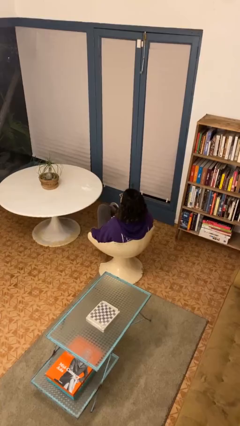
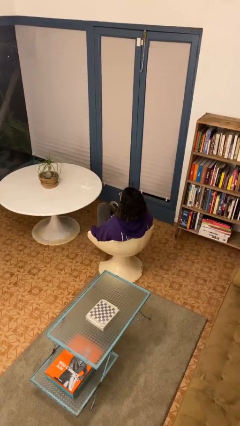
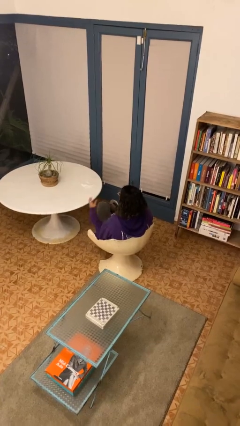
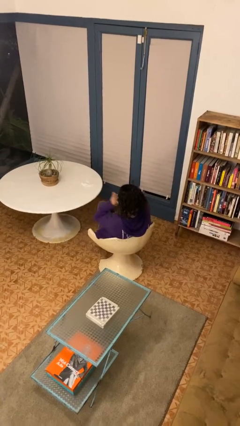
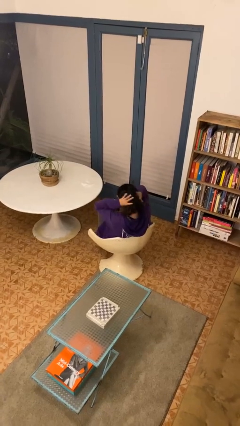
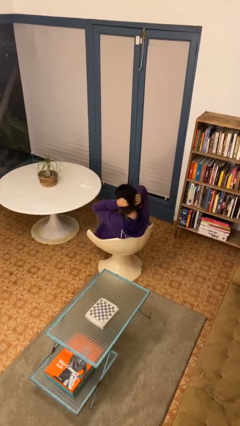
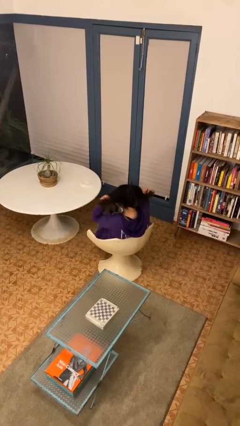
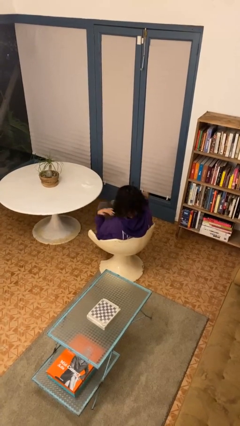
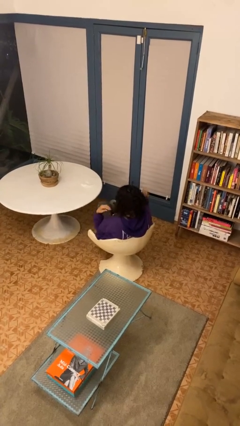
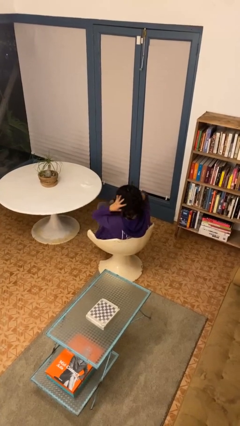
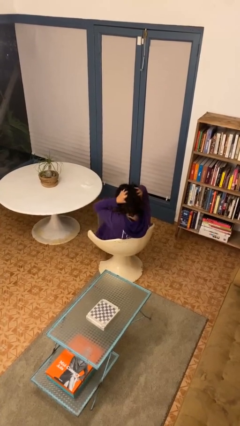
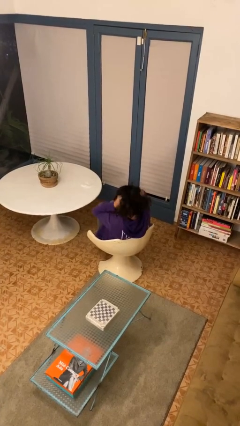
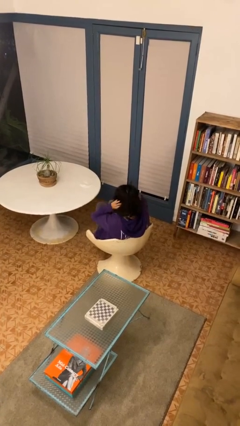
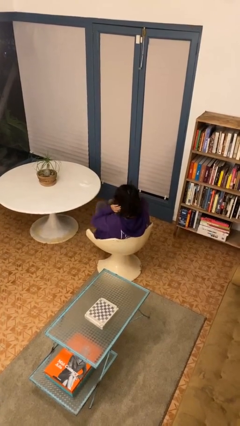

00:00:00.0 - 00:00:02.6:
person strokes hair

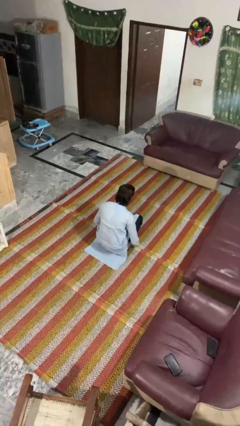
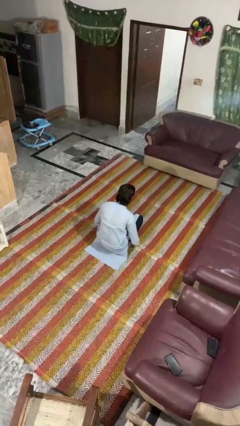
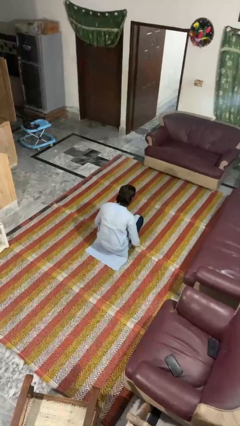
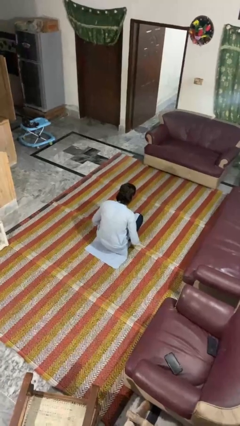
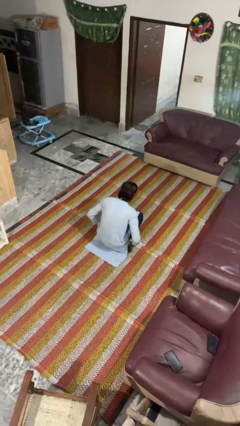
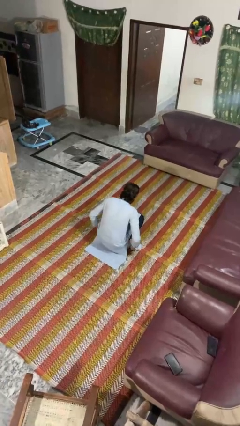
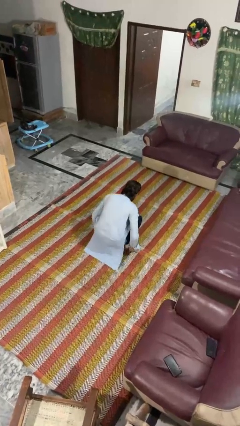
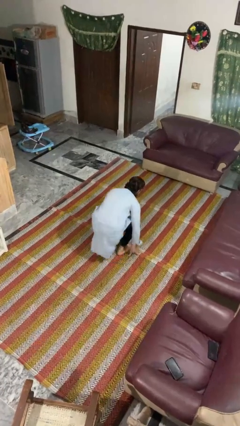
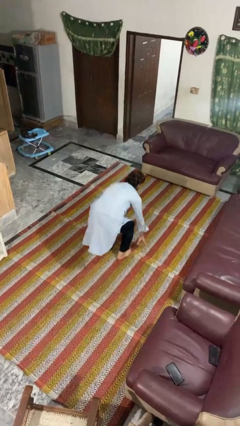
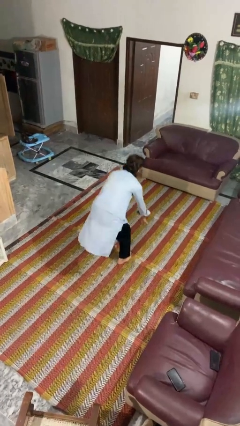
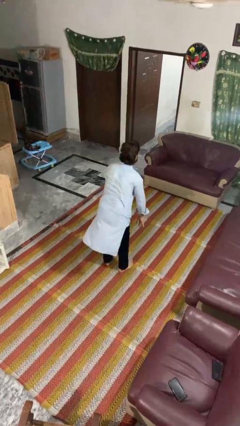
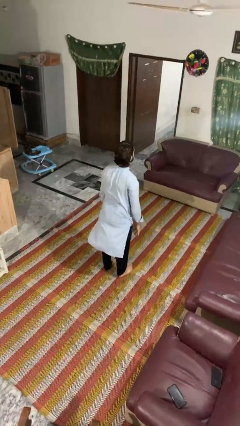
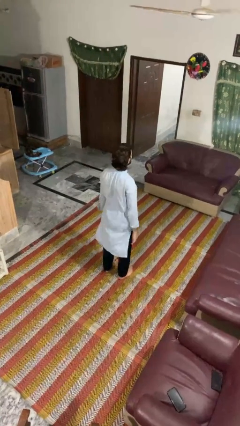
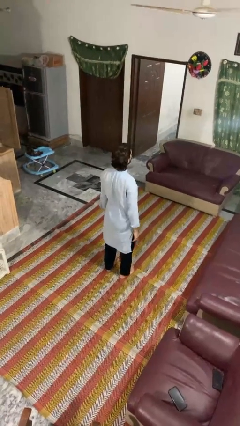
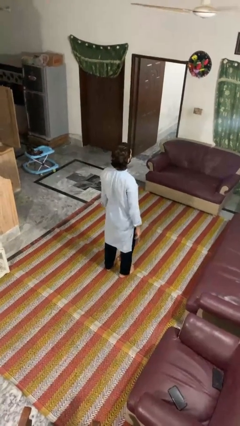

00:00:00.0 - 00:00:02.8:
person stands up

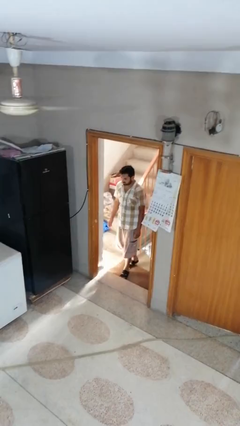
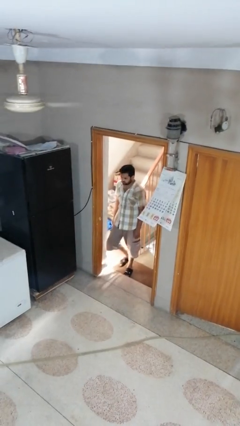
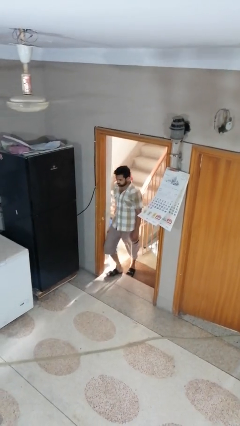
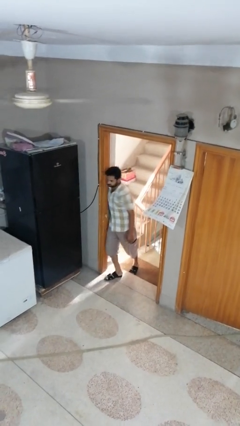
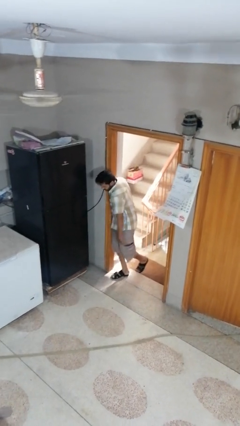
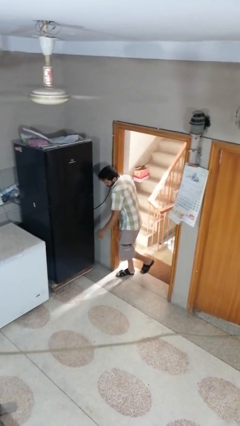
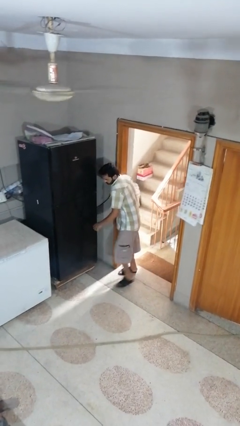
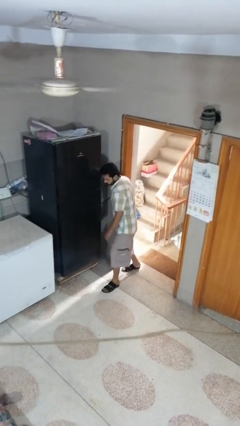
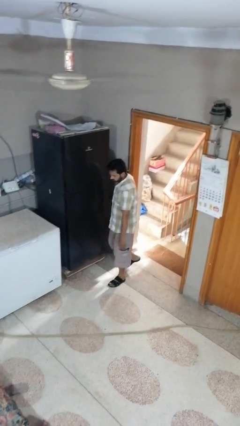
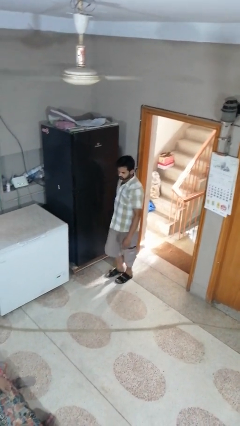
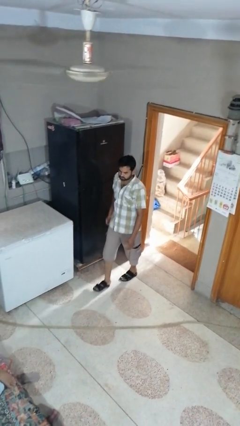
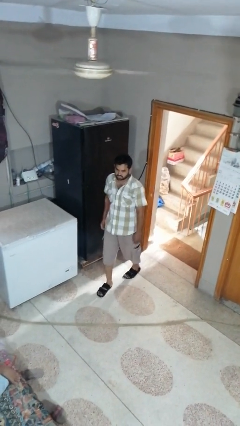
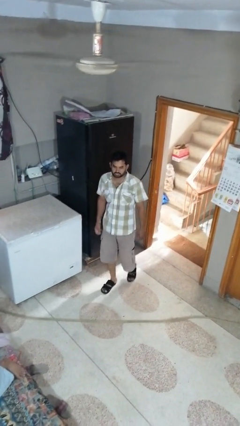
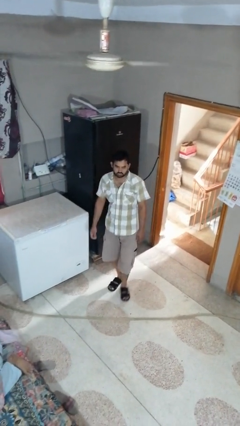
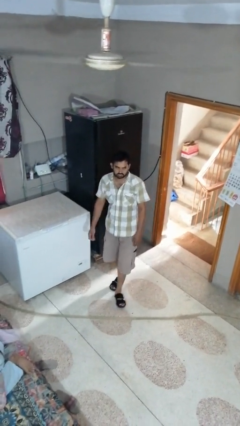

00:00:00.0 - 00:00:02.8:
person bumps into wall

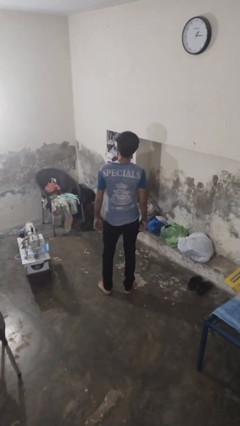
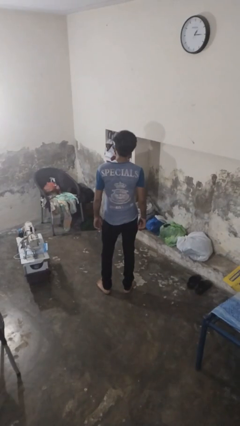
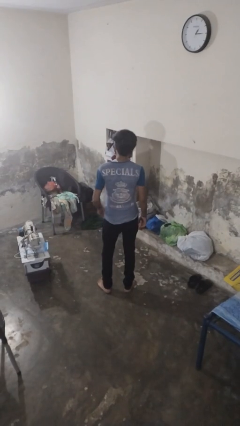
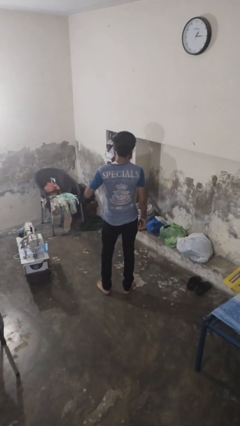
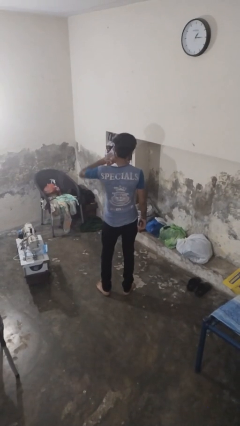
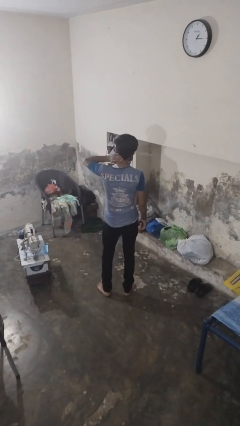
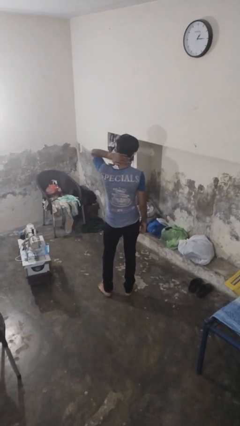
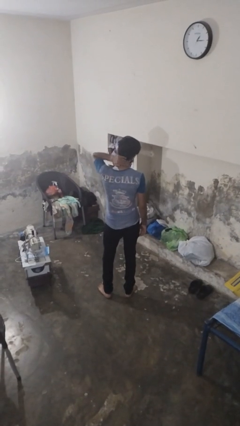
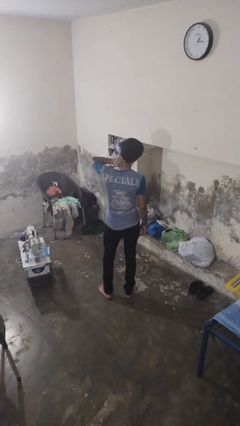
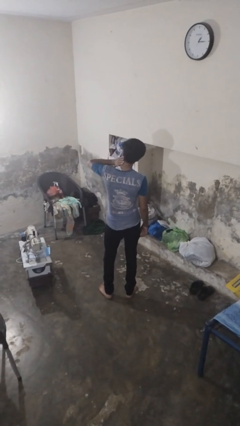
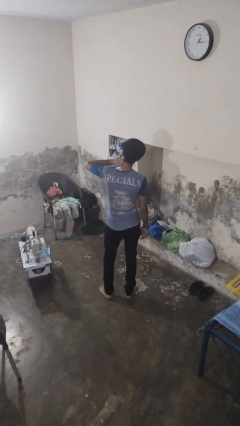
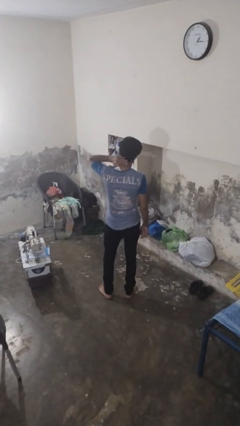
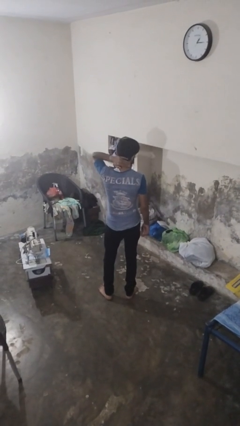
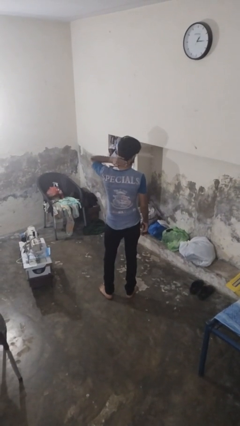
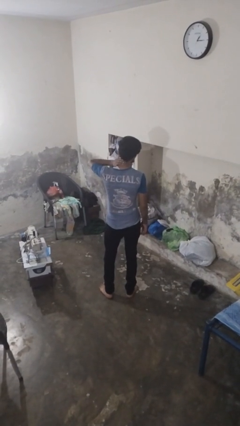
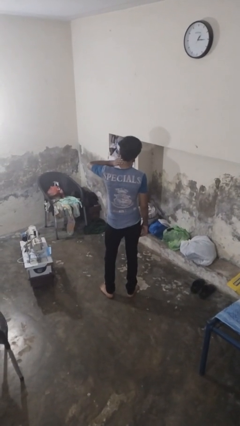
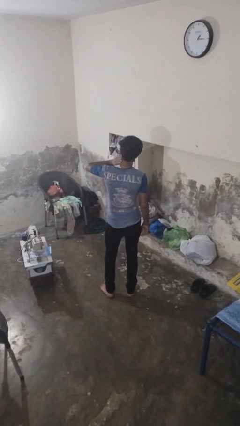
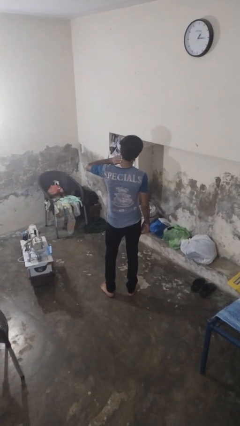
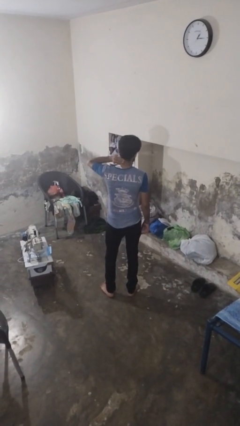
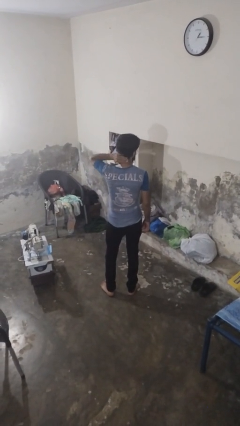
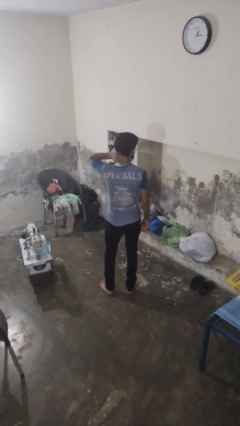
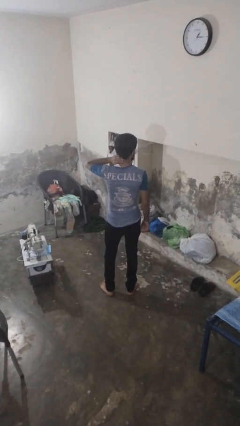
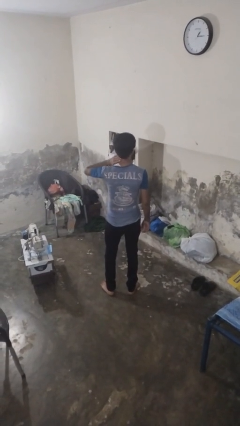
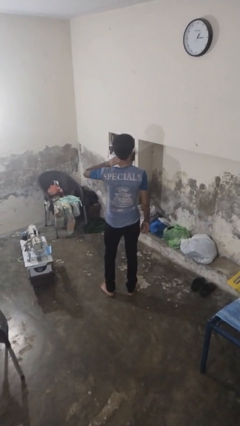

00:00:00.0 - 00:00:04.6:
person rubs neck

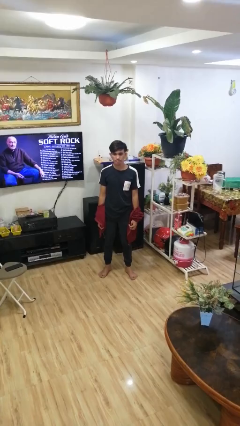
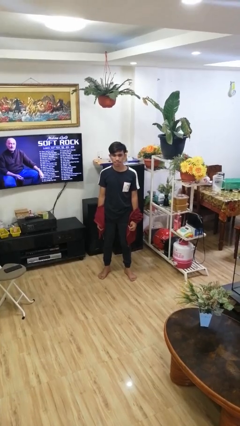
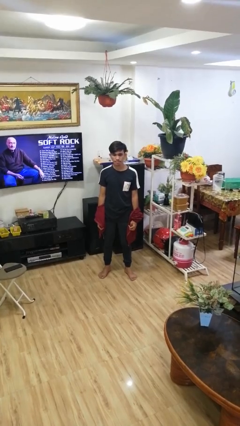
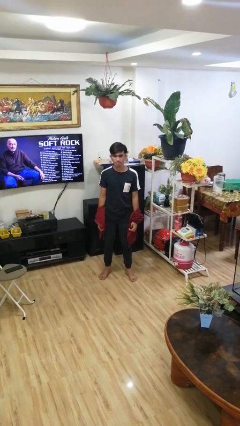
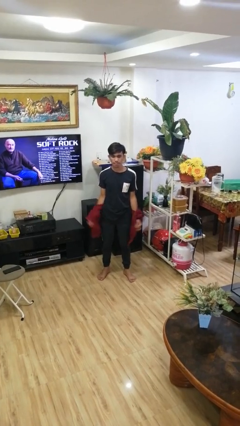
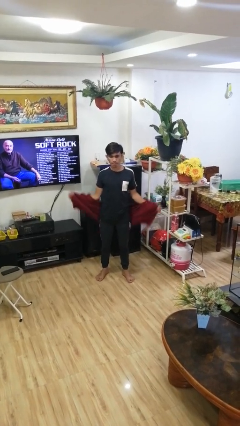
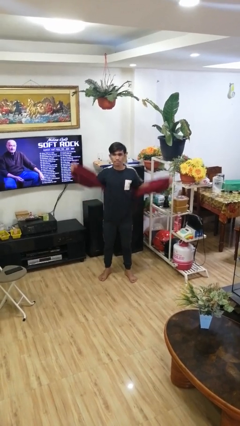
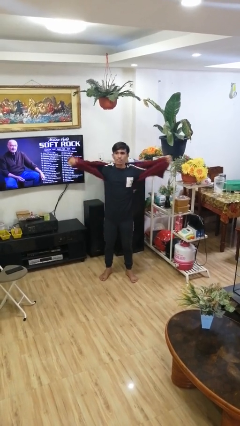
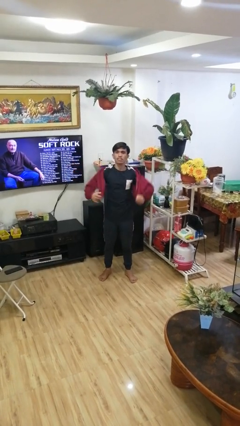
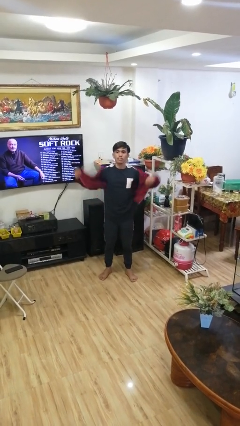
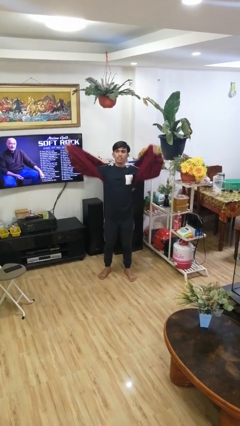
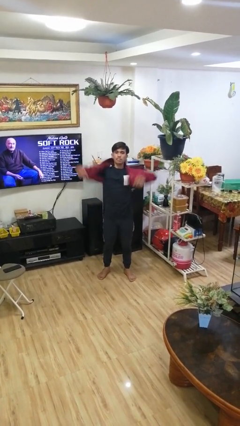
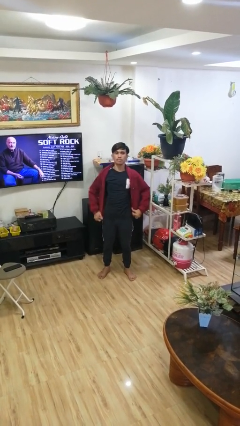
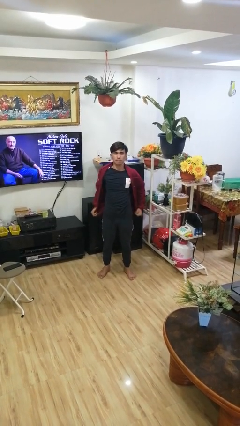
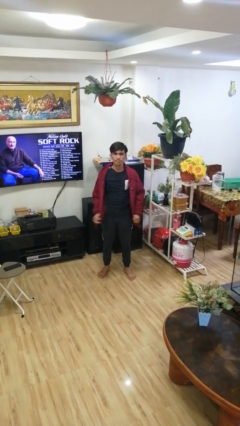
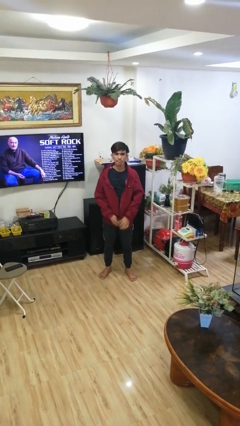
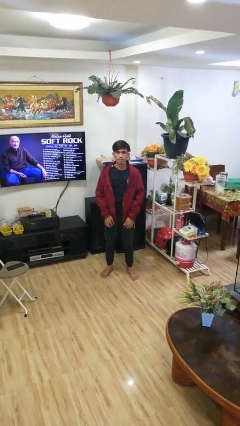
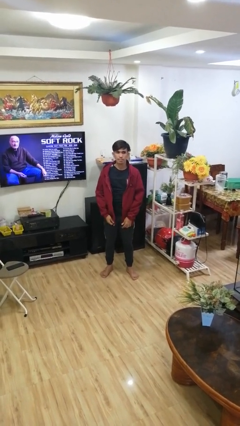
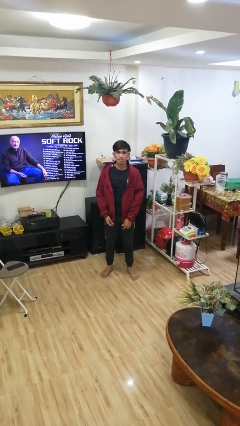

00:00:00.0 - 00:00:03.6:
person puts on jacket

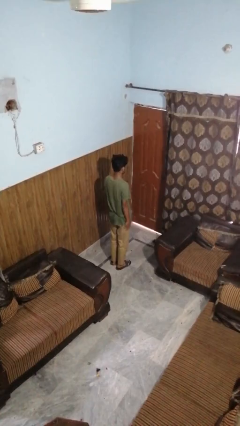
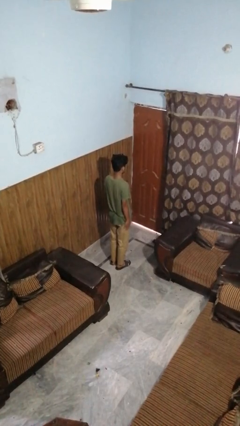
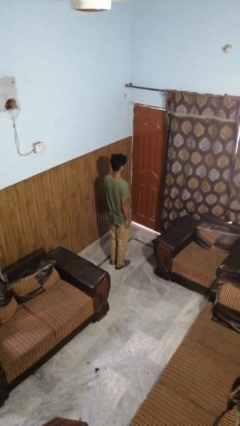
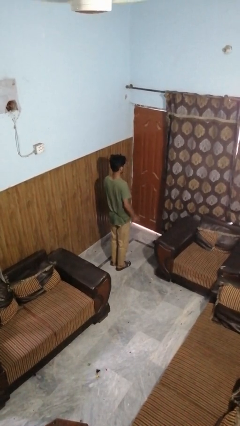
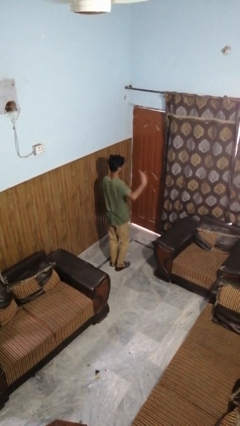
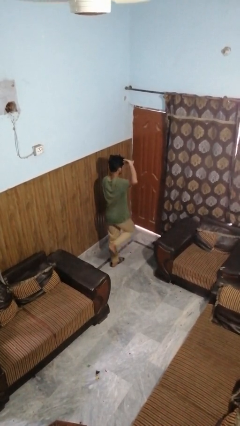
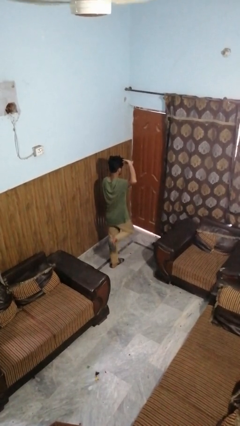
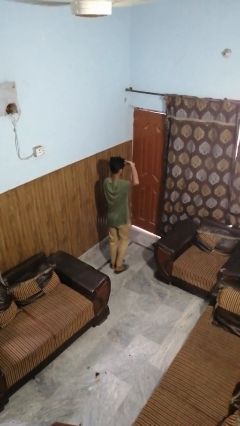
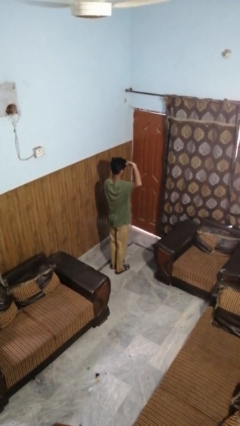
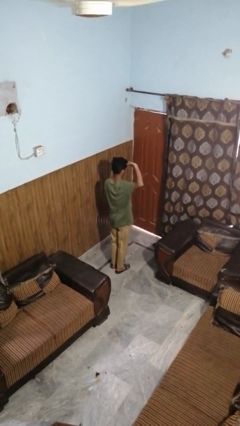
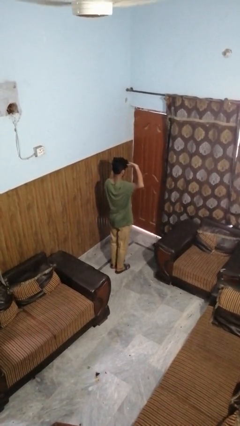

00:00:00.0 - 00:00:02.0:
person salutes
